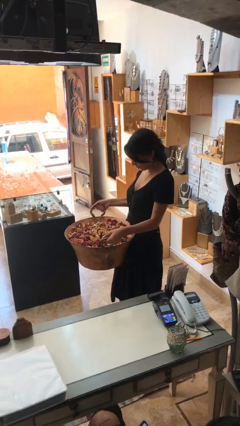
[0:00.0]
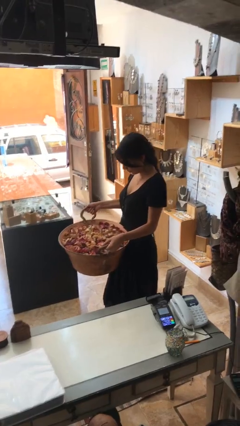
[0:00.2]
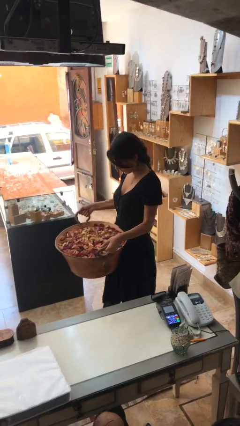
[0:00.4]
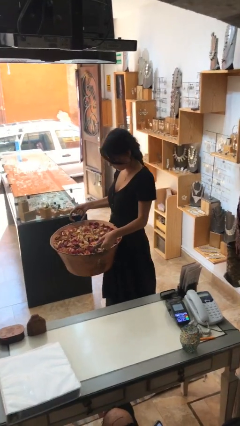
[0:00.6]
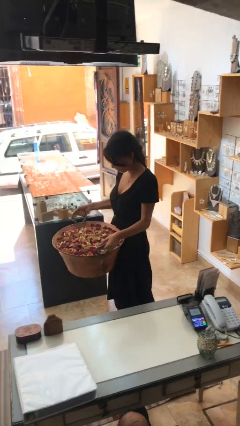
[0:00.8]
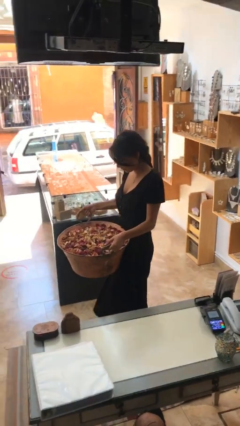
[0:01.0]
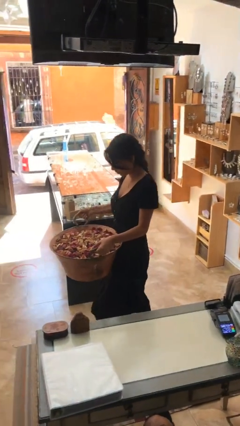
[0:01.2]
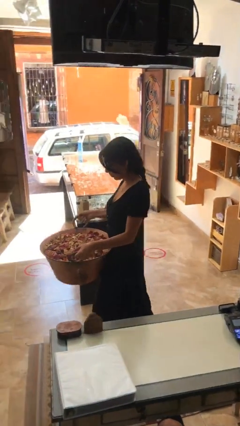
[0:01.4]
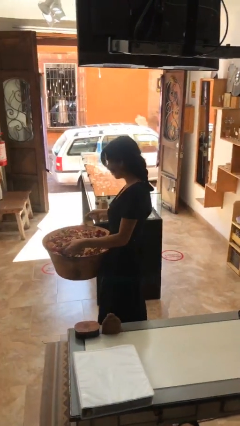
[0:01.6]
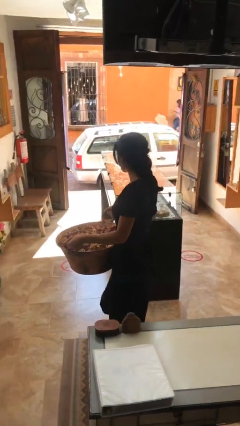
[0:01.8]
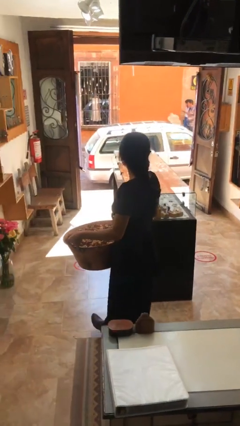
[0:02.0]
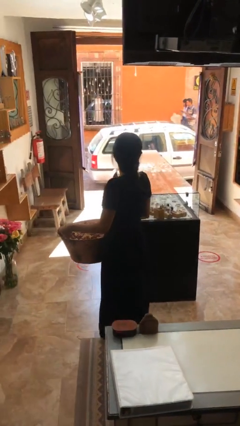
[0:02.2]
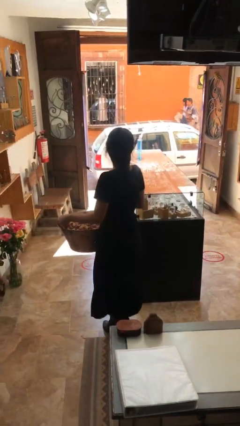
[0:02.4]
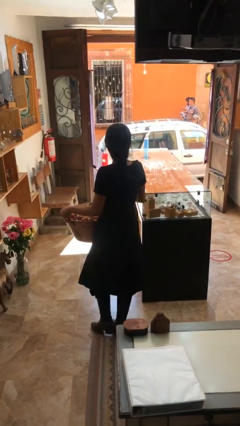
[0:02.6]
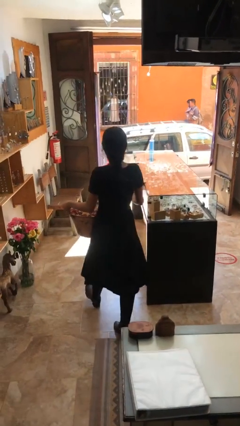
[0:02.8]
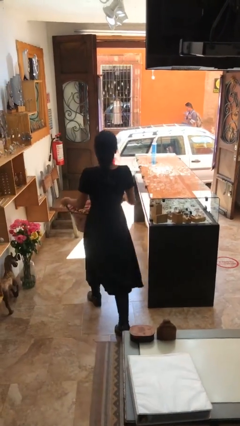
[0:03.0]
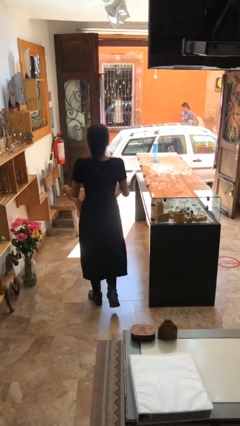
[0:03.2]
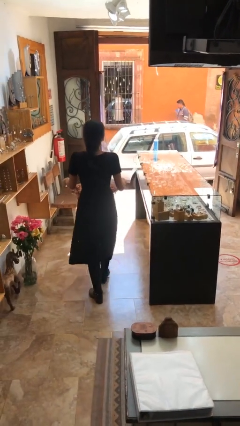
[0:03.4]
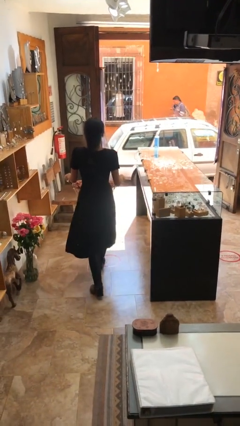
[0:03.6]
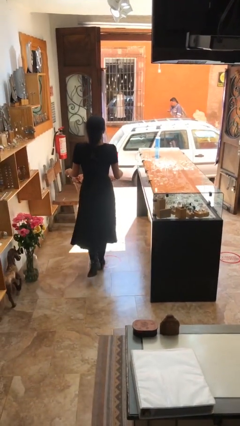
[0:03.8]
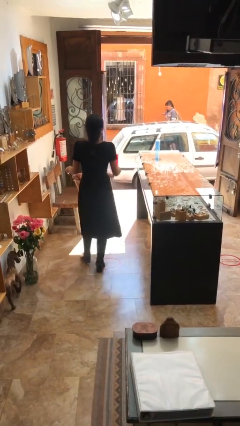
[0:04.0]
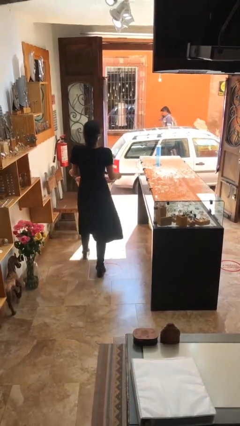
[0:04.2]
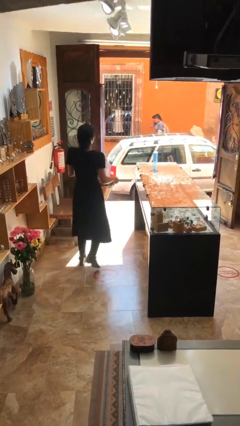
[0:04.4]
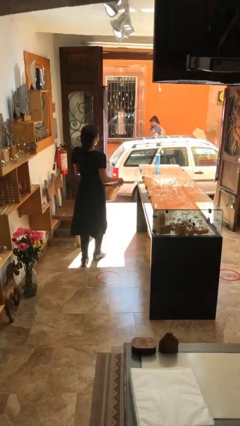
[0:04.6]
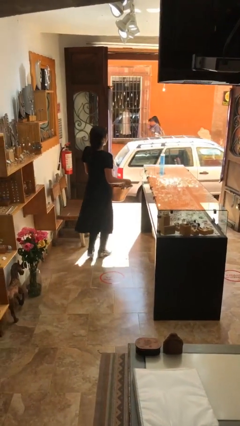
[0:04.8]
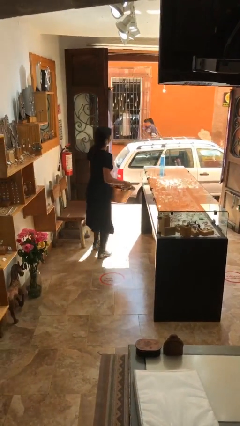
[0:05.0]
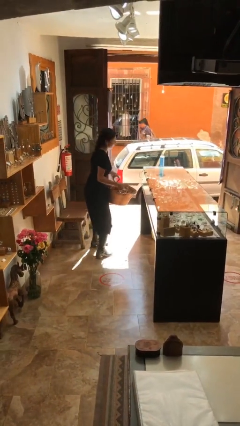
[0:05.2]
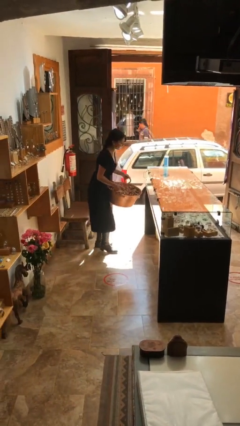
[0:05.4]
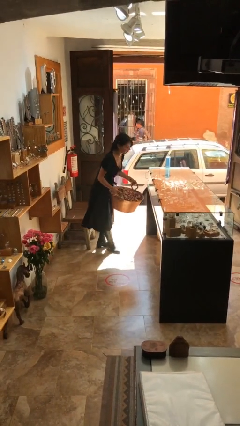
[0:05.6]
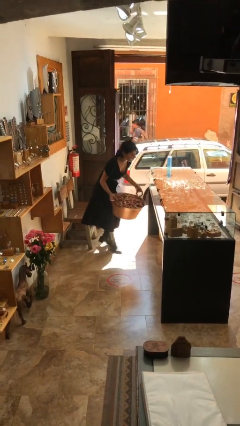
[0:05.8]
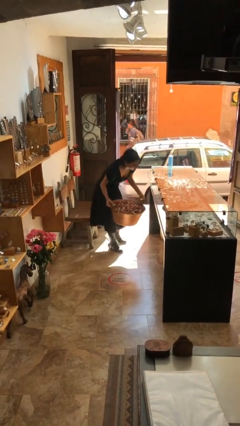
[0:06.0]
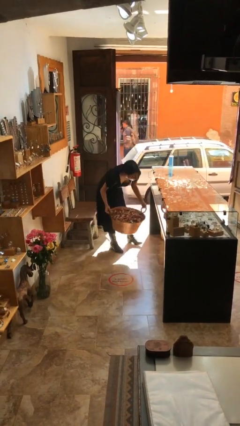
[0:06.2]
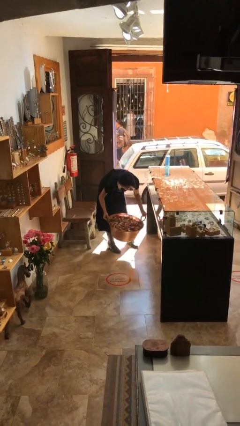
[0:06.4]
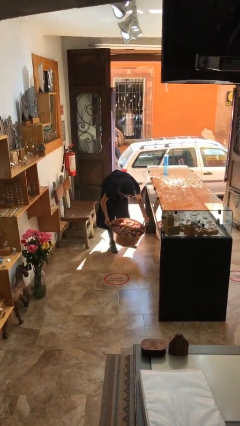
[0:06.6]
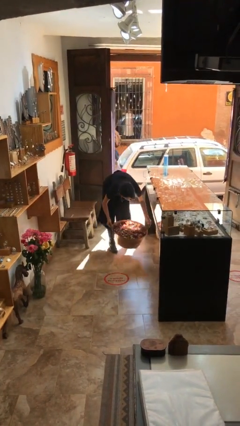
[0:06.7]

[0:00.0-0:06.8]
person carries heavy object

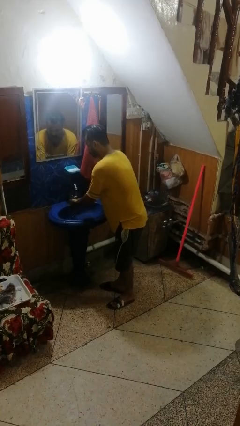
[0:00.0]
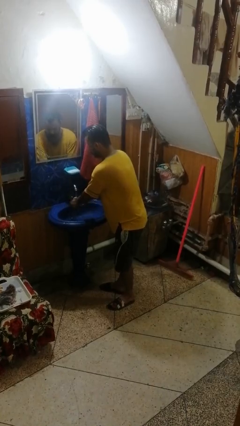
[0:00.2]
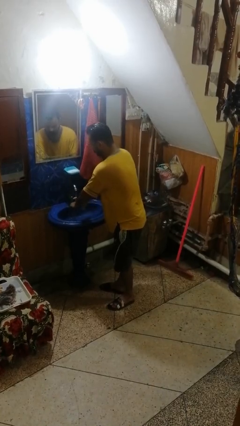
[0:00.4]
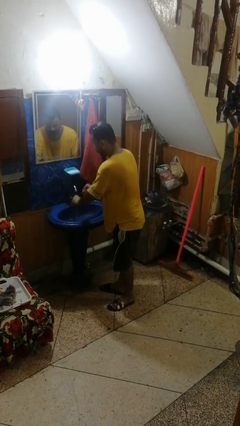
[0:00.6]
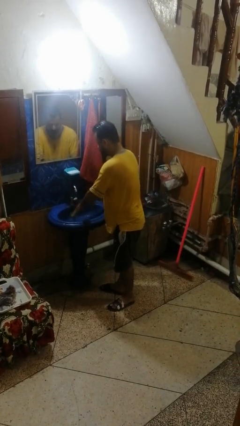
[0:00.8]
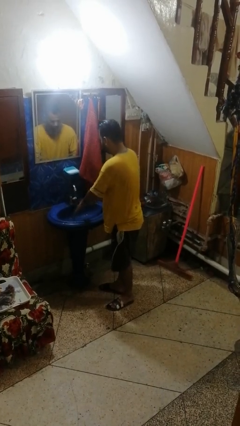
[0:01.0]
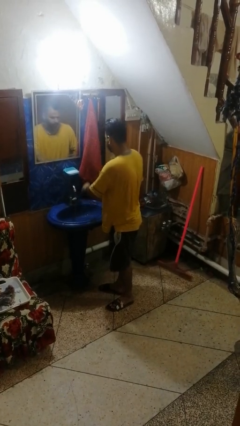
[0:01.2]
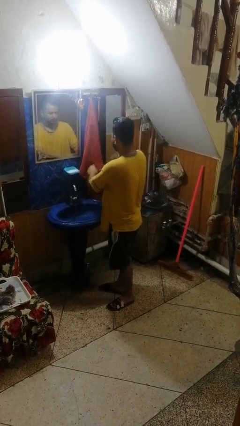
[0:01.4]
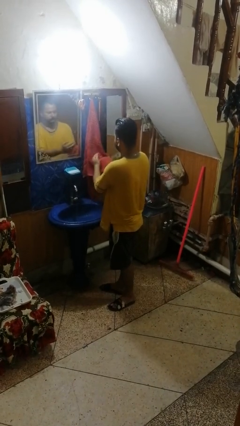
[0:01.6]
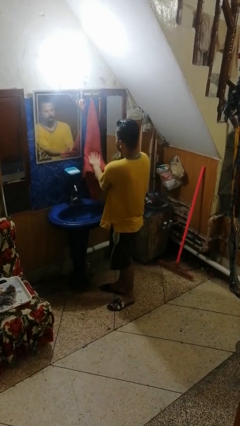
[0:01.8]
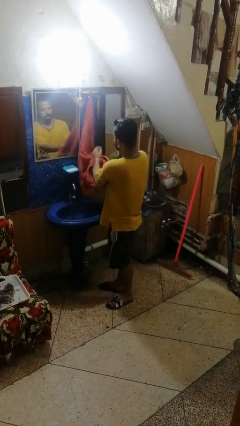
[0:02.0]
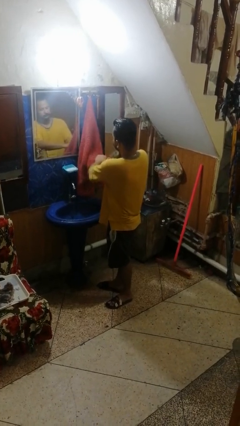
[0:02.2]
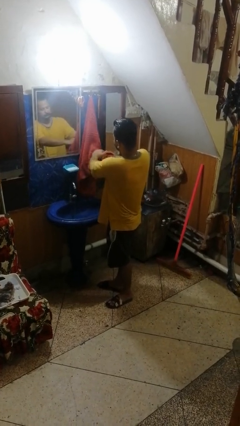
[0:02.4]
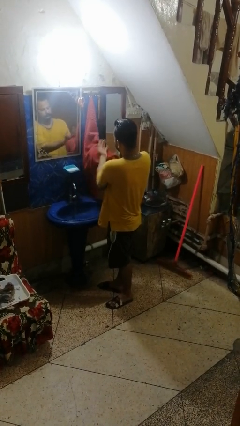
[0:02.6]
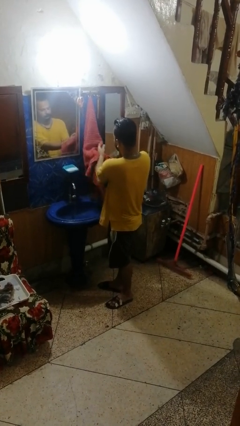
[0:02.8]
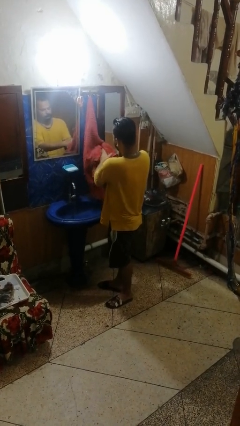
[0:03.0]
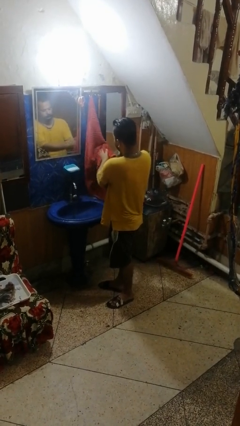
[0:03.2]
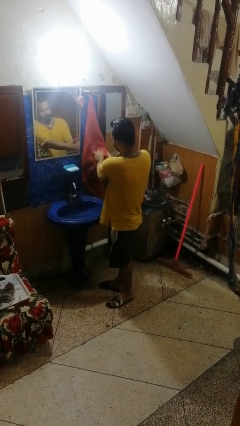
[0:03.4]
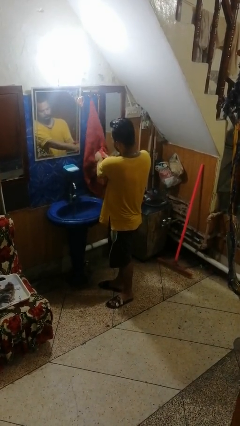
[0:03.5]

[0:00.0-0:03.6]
person dries hands with towel

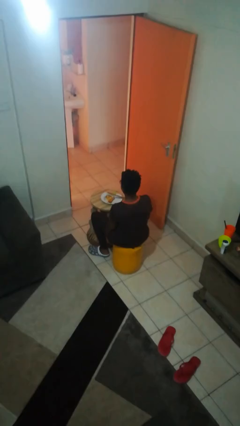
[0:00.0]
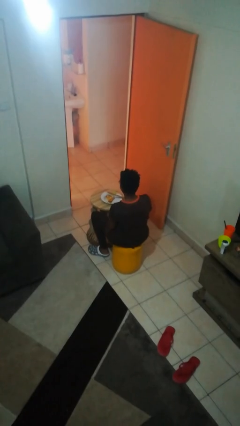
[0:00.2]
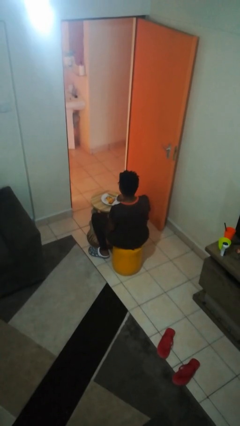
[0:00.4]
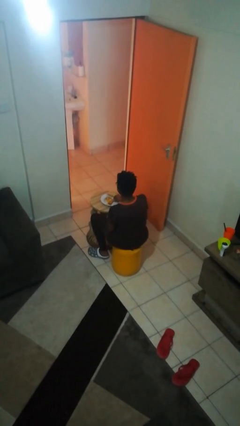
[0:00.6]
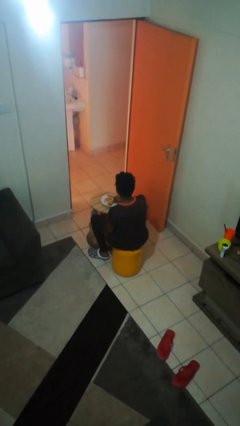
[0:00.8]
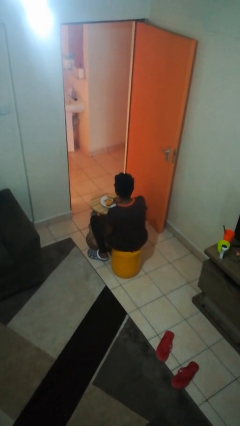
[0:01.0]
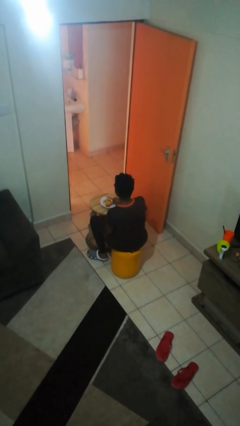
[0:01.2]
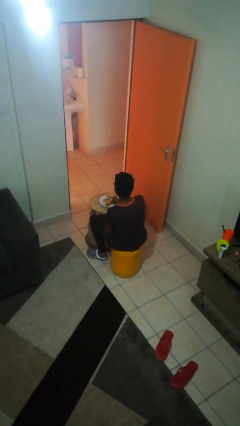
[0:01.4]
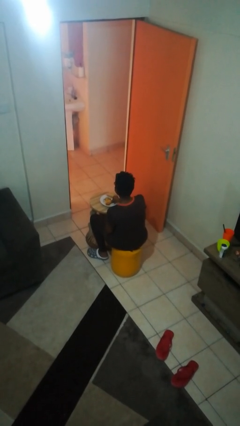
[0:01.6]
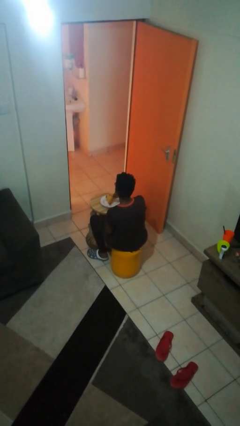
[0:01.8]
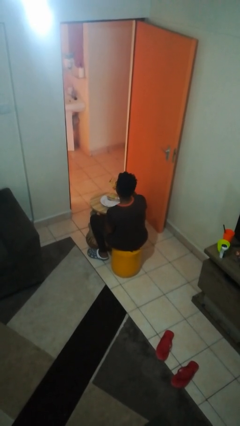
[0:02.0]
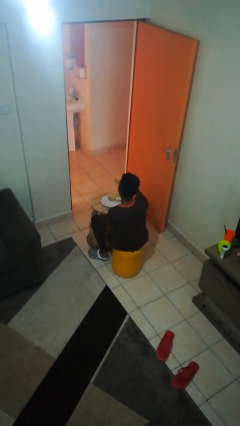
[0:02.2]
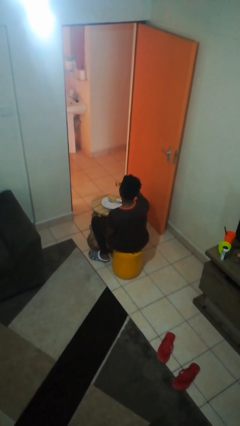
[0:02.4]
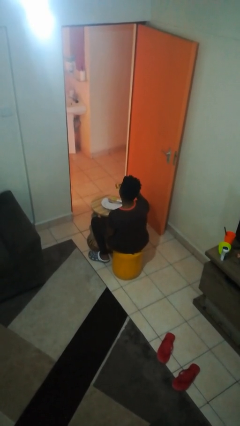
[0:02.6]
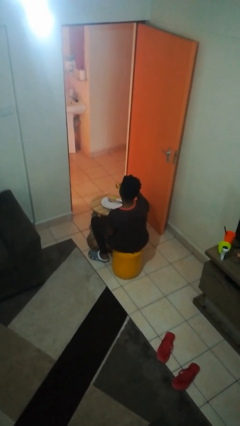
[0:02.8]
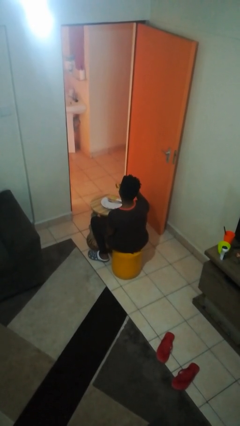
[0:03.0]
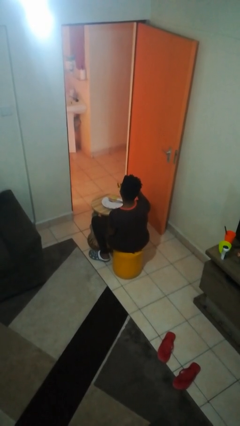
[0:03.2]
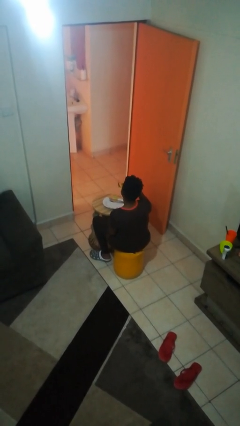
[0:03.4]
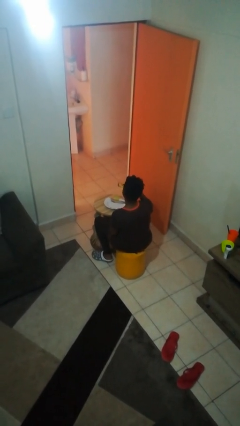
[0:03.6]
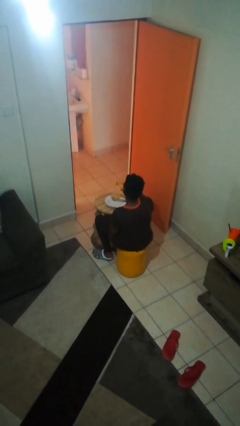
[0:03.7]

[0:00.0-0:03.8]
person eats with hands

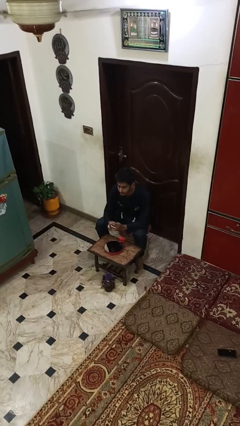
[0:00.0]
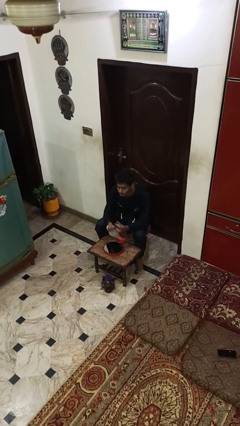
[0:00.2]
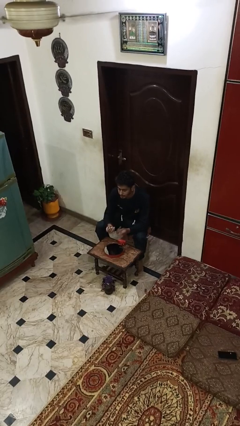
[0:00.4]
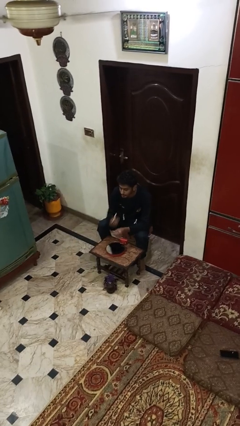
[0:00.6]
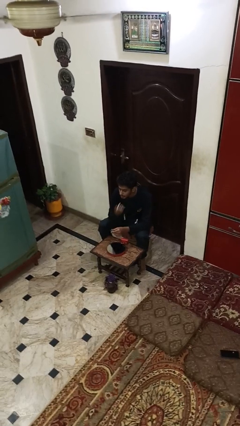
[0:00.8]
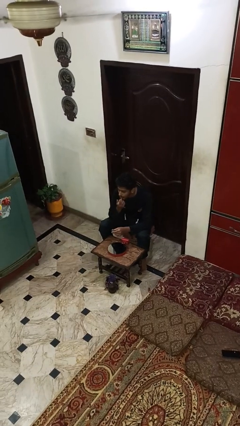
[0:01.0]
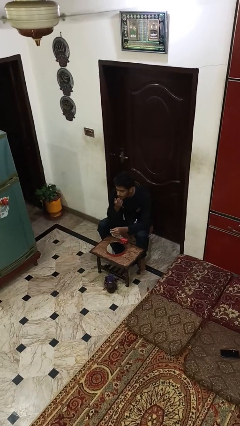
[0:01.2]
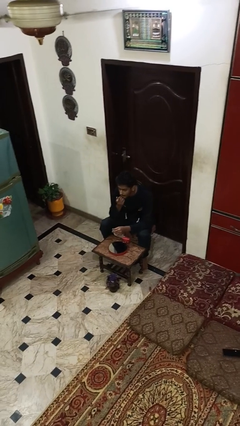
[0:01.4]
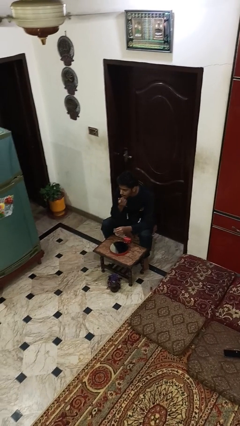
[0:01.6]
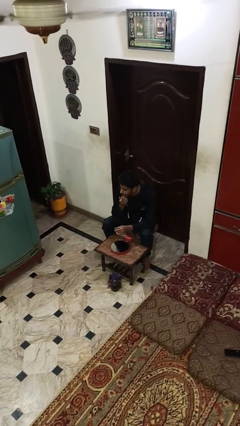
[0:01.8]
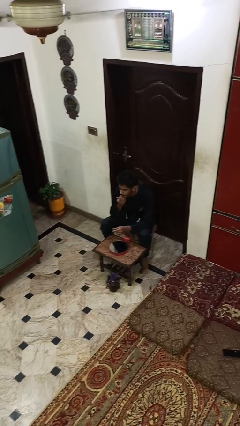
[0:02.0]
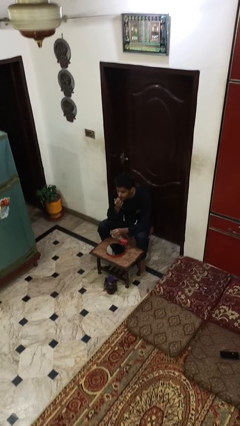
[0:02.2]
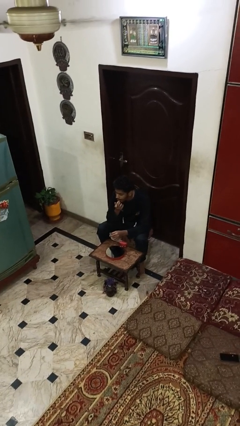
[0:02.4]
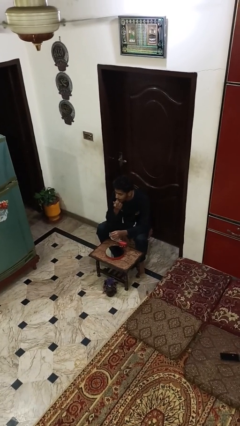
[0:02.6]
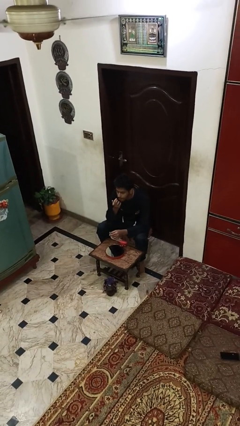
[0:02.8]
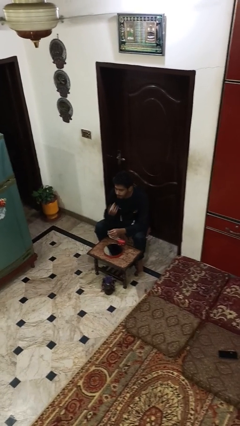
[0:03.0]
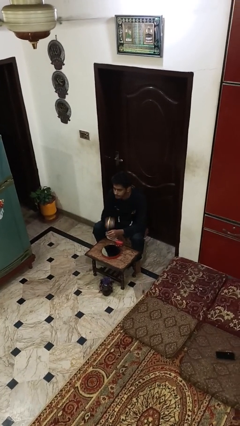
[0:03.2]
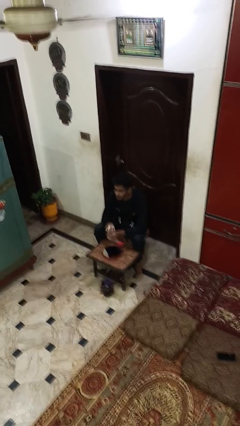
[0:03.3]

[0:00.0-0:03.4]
person applies lip makeup

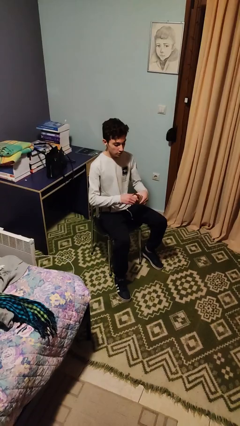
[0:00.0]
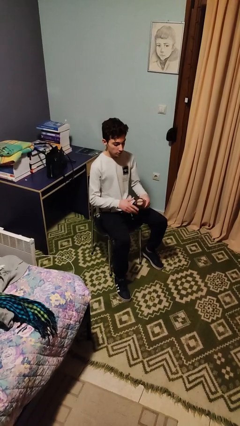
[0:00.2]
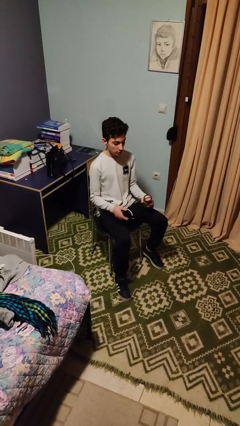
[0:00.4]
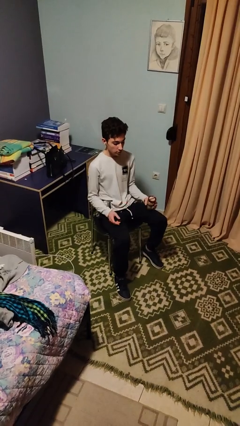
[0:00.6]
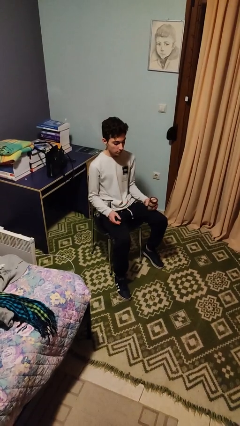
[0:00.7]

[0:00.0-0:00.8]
person closes jar
